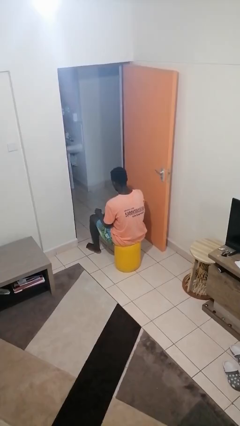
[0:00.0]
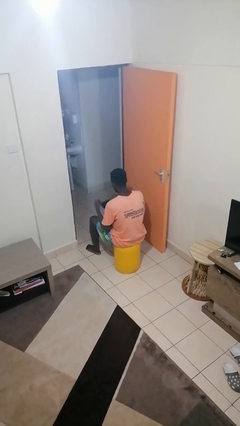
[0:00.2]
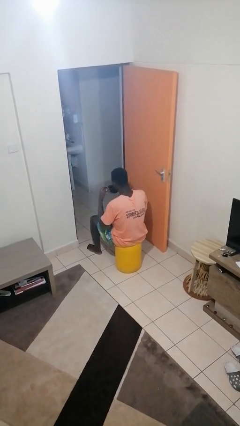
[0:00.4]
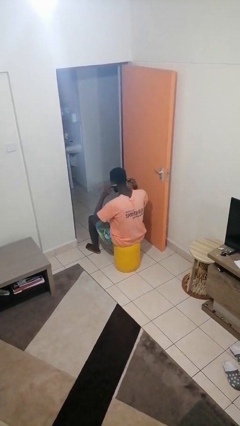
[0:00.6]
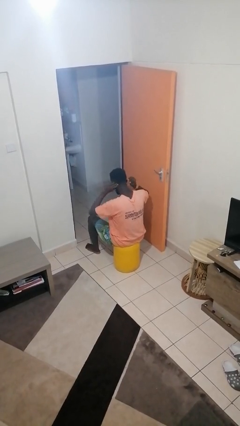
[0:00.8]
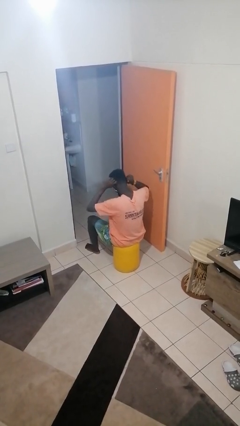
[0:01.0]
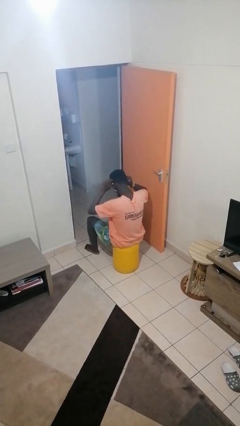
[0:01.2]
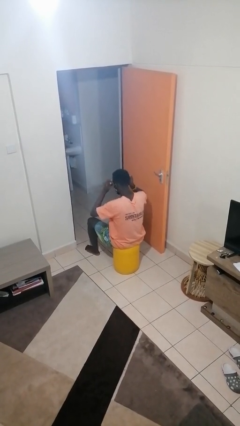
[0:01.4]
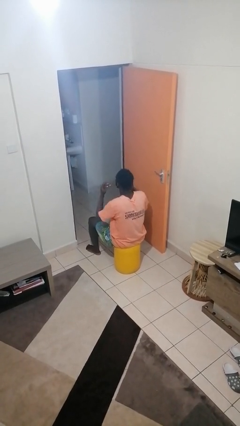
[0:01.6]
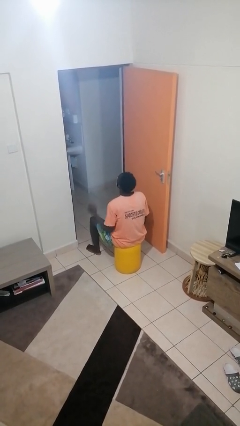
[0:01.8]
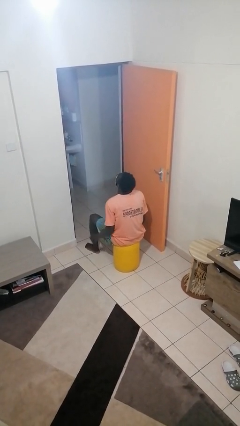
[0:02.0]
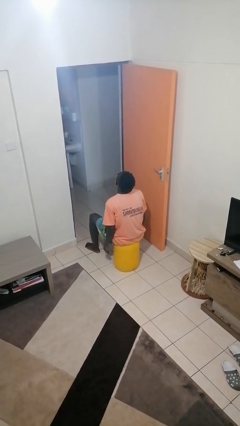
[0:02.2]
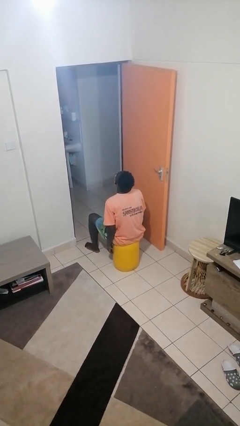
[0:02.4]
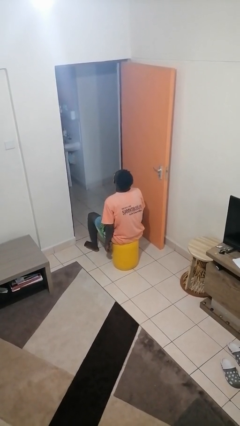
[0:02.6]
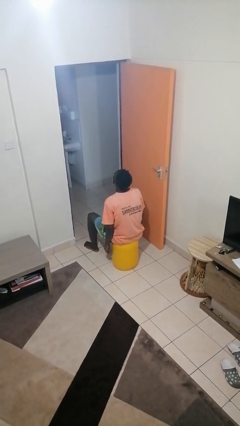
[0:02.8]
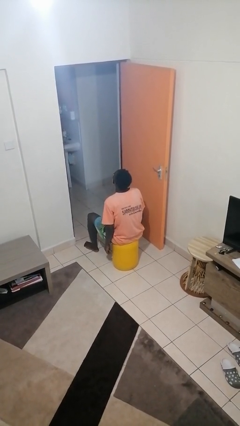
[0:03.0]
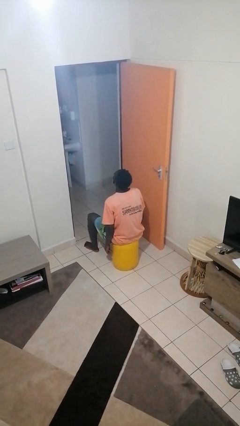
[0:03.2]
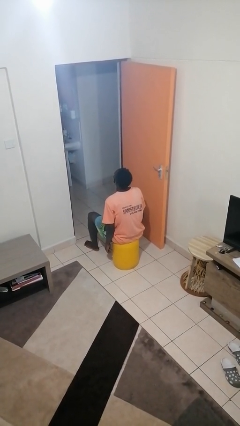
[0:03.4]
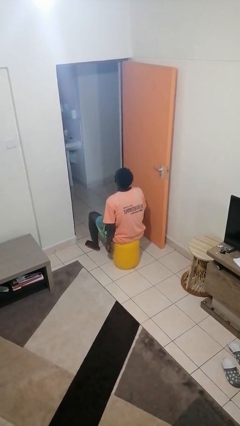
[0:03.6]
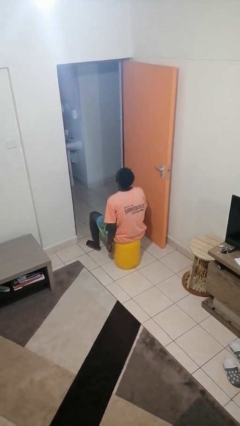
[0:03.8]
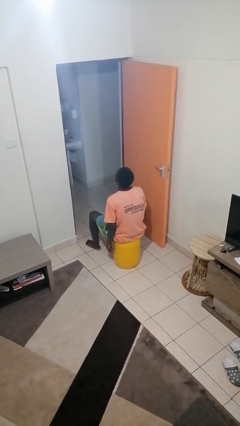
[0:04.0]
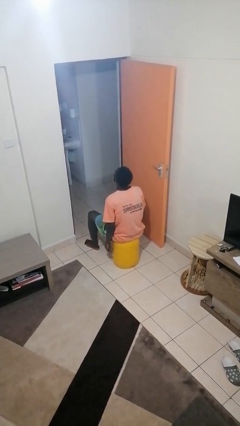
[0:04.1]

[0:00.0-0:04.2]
person puts on facemask

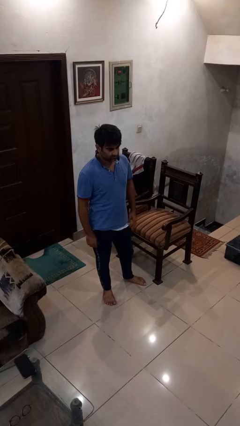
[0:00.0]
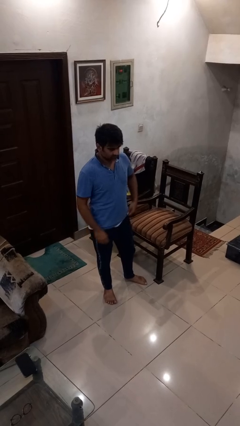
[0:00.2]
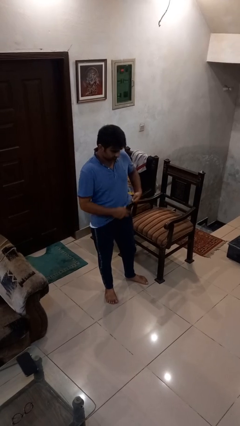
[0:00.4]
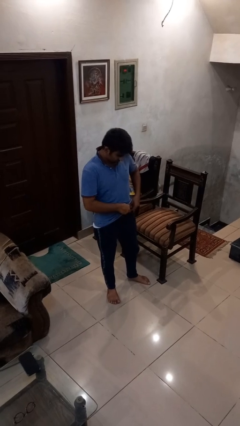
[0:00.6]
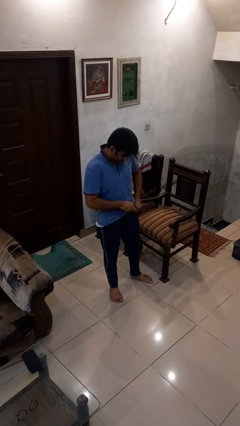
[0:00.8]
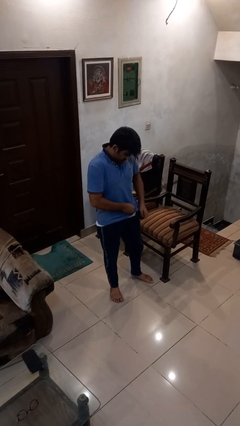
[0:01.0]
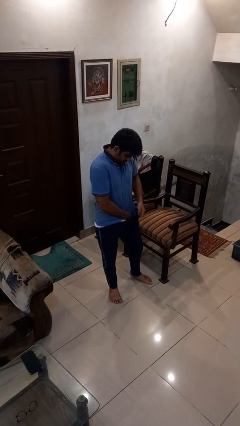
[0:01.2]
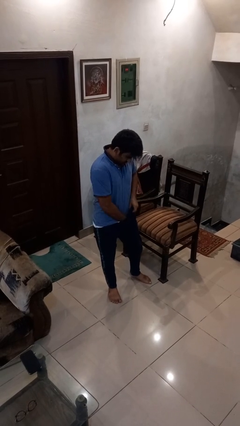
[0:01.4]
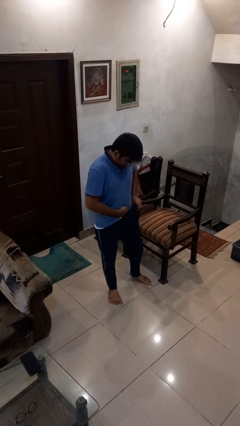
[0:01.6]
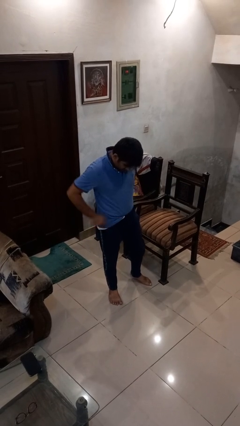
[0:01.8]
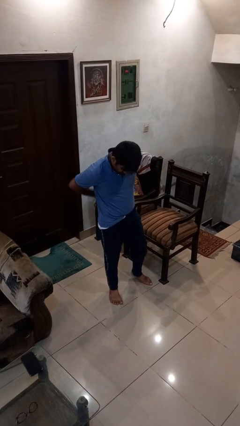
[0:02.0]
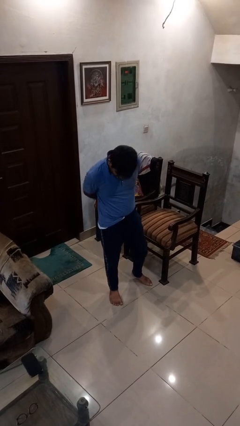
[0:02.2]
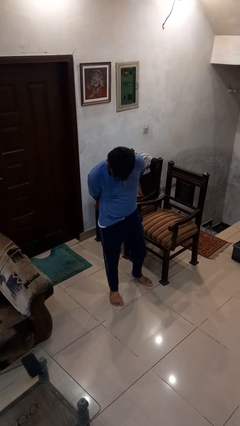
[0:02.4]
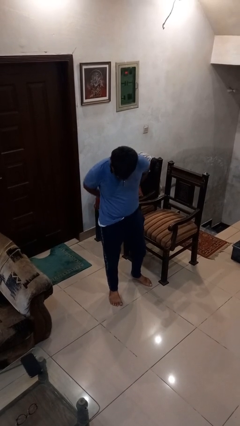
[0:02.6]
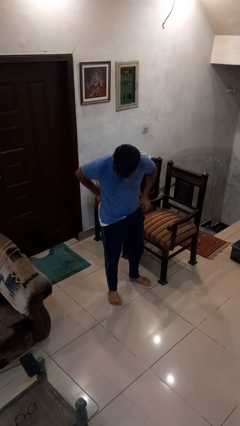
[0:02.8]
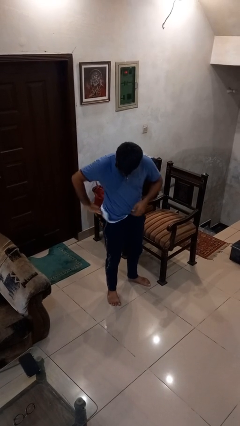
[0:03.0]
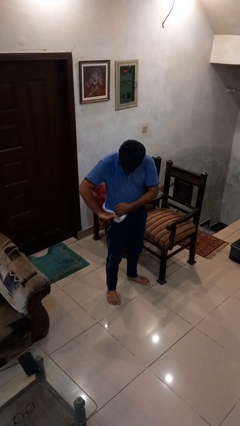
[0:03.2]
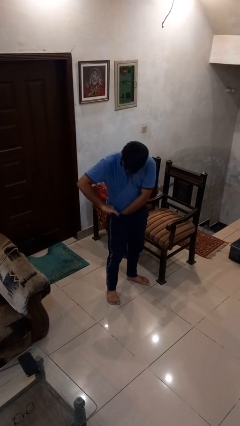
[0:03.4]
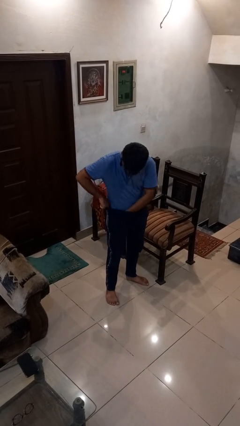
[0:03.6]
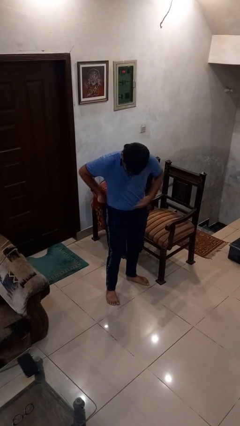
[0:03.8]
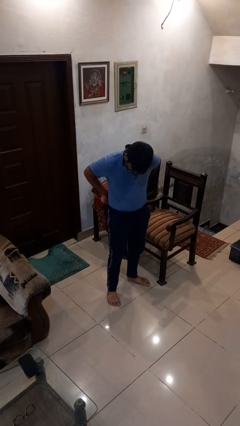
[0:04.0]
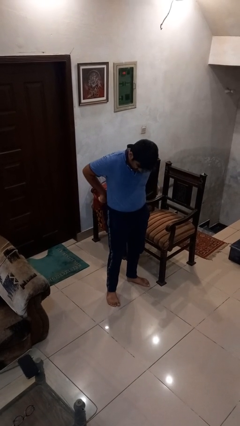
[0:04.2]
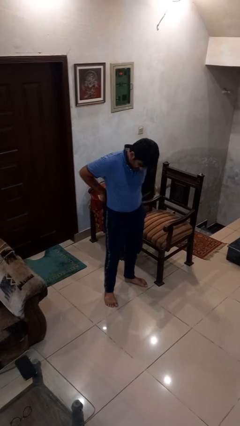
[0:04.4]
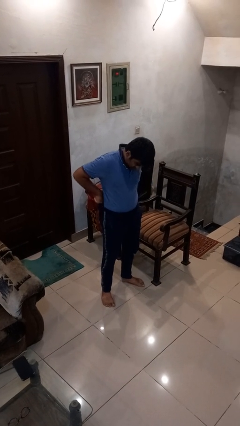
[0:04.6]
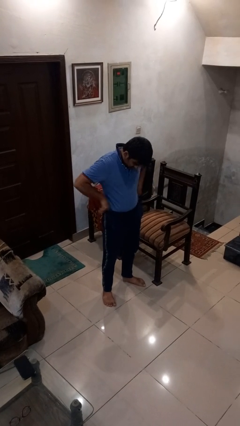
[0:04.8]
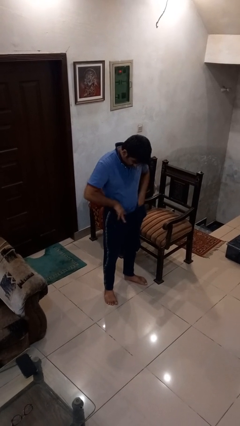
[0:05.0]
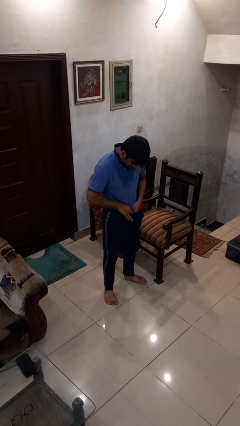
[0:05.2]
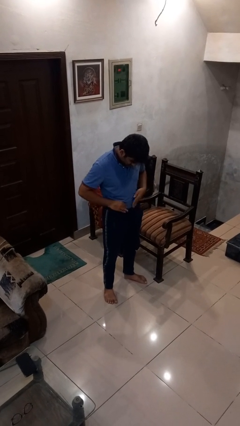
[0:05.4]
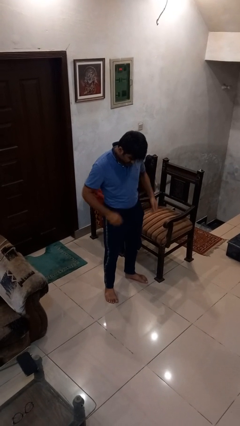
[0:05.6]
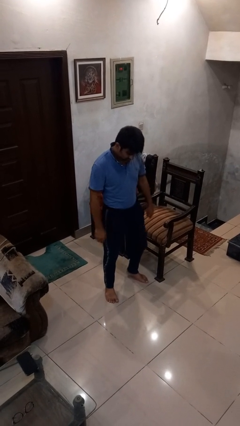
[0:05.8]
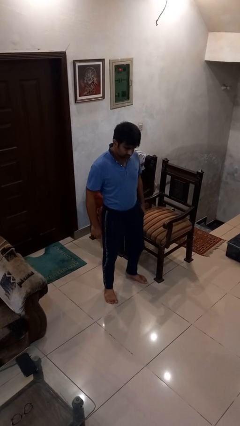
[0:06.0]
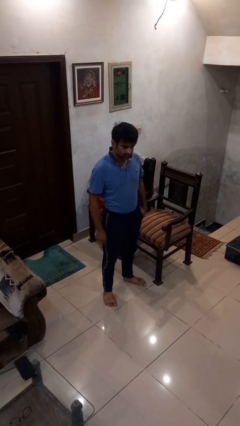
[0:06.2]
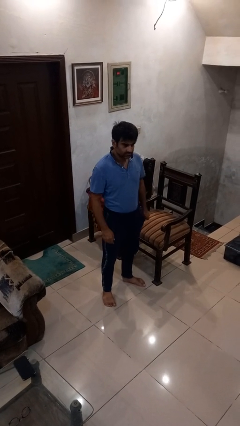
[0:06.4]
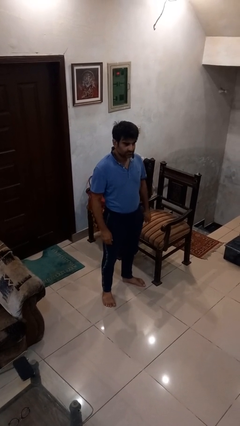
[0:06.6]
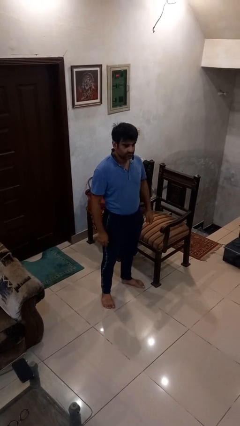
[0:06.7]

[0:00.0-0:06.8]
person tucks in shirt

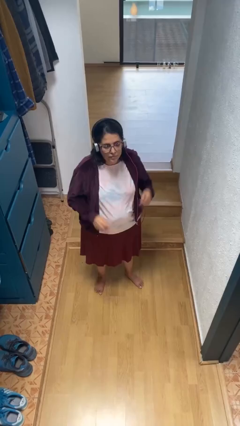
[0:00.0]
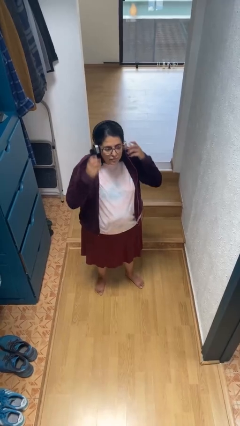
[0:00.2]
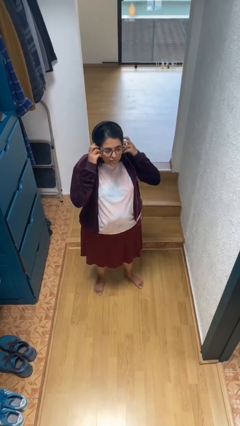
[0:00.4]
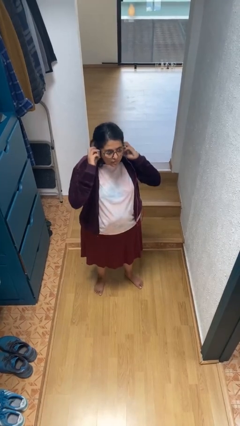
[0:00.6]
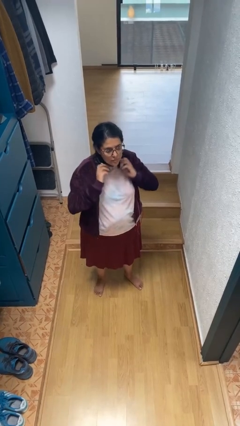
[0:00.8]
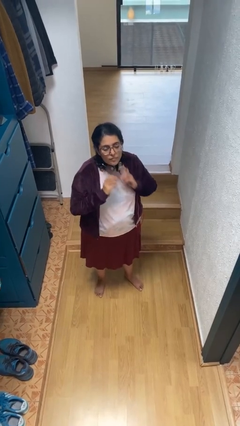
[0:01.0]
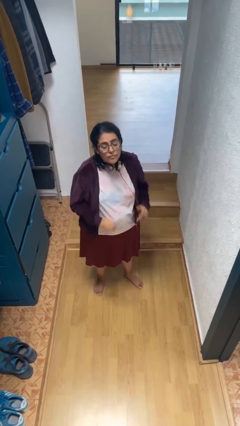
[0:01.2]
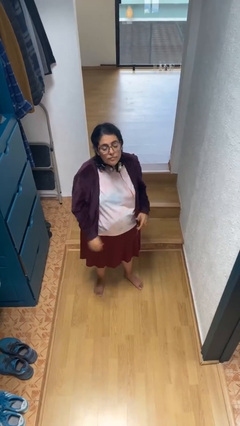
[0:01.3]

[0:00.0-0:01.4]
person takes off headphones

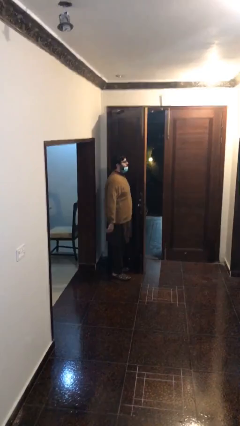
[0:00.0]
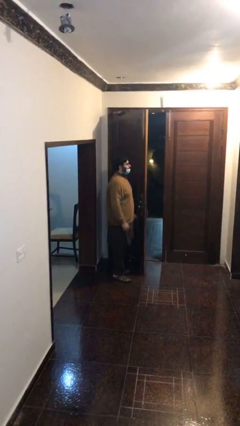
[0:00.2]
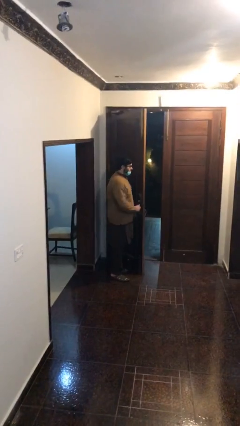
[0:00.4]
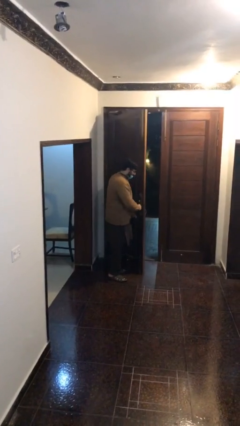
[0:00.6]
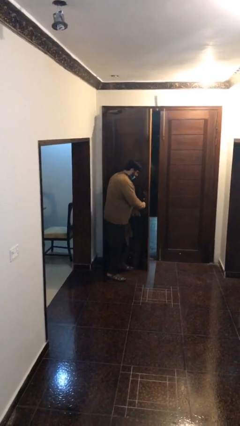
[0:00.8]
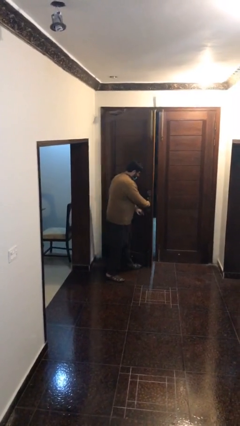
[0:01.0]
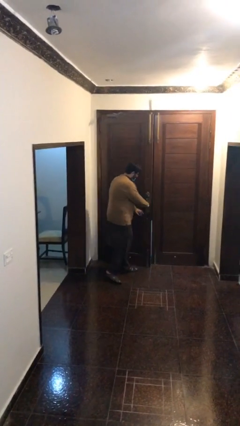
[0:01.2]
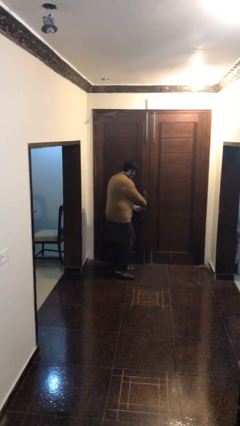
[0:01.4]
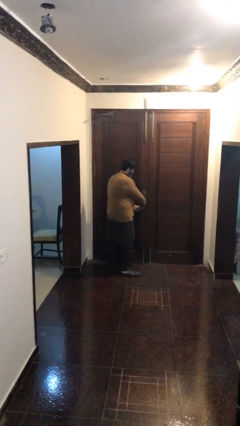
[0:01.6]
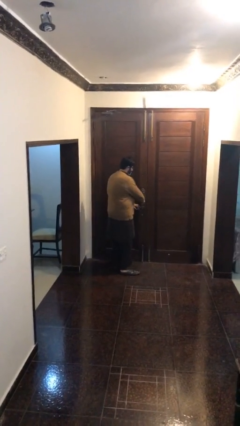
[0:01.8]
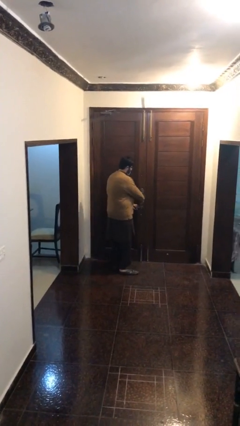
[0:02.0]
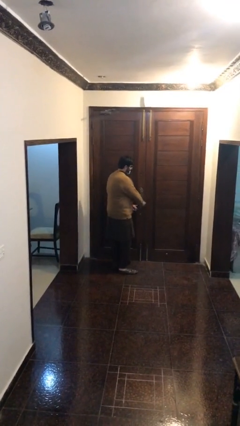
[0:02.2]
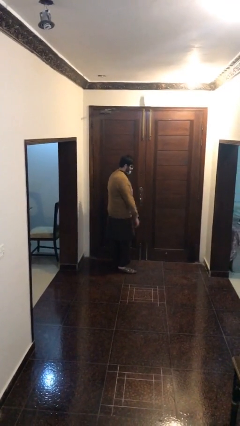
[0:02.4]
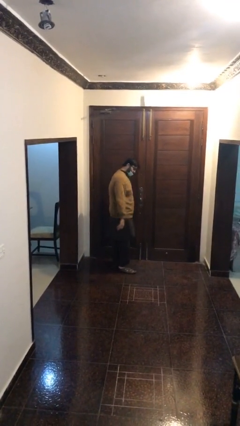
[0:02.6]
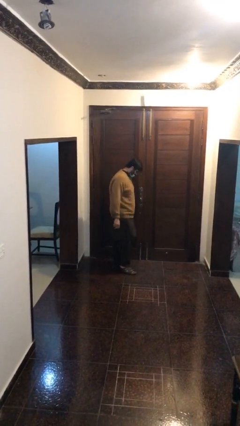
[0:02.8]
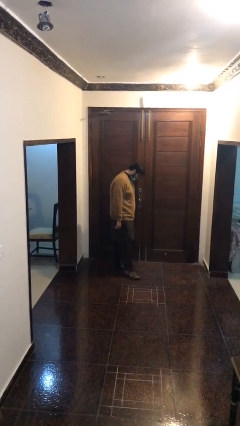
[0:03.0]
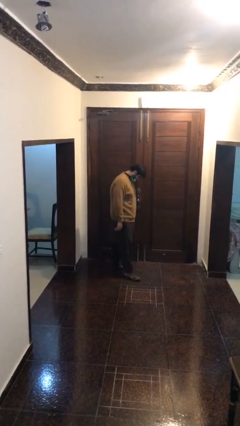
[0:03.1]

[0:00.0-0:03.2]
person closes facility door

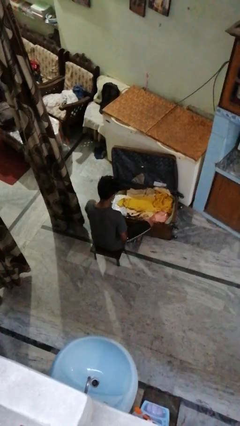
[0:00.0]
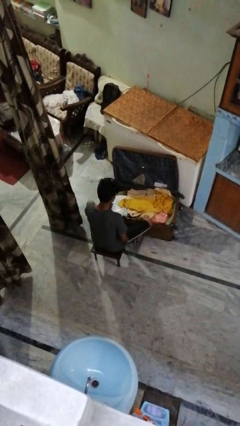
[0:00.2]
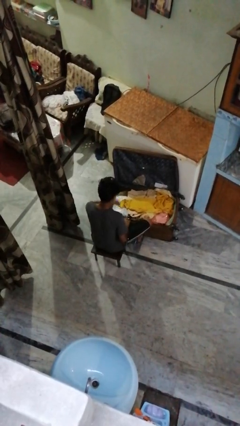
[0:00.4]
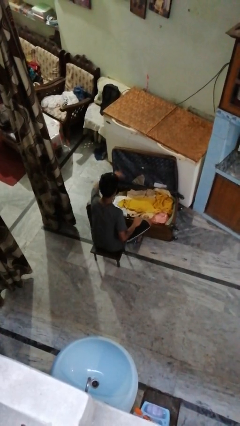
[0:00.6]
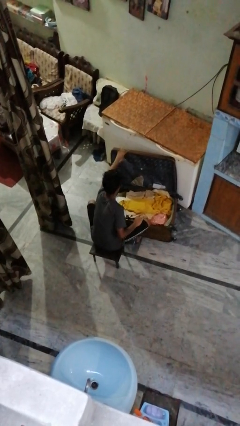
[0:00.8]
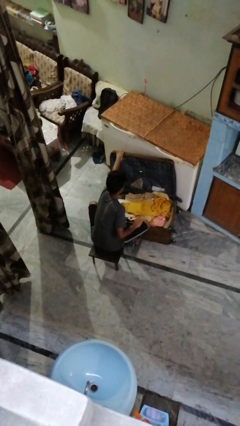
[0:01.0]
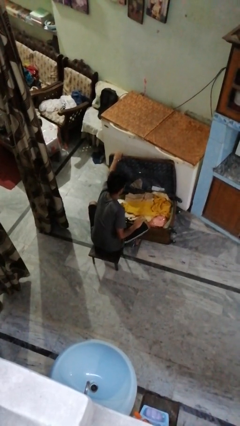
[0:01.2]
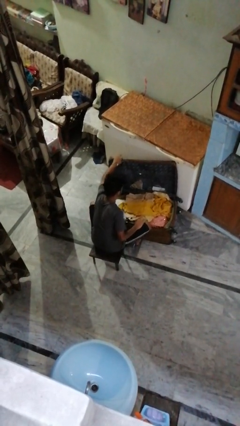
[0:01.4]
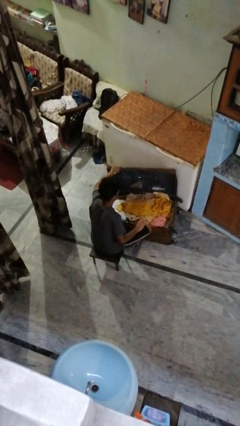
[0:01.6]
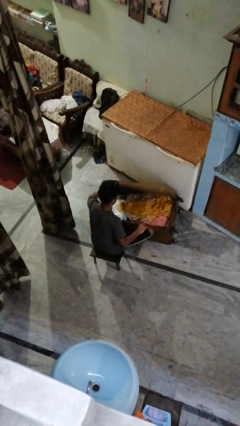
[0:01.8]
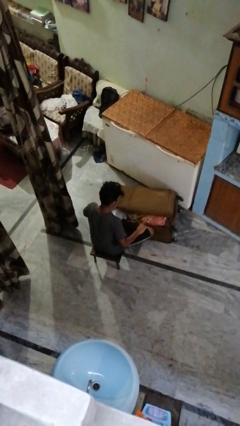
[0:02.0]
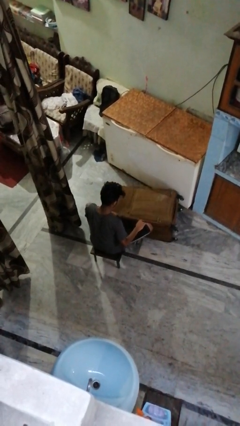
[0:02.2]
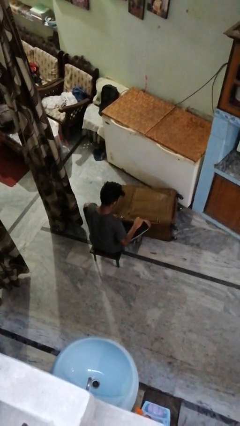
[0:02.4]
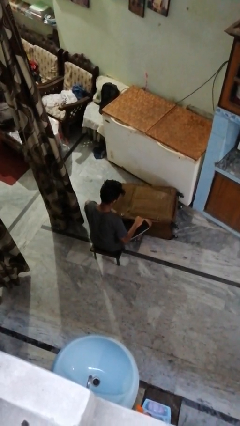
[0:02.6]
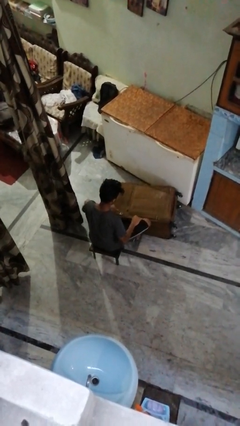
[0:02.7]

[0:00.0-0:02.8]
person closes suitcase
